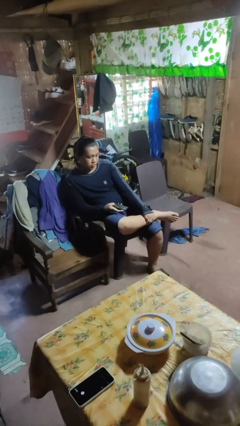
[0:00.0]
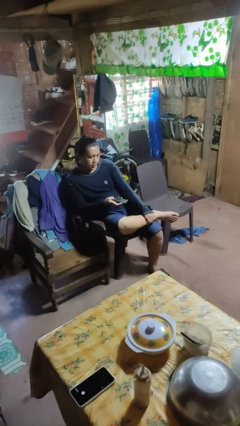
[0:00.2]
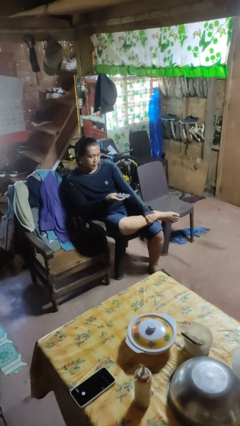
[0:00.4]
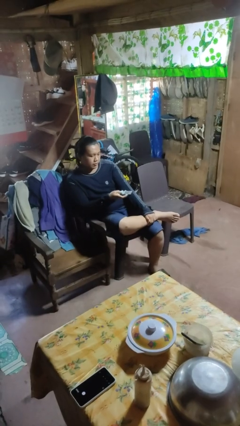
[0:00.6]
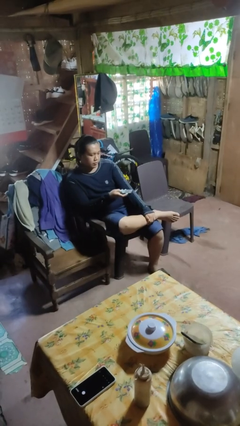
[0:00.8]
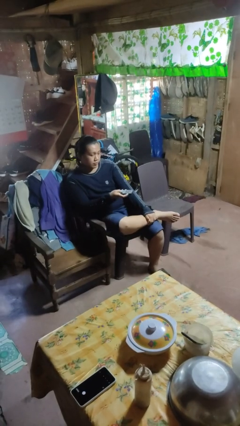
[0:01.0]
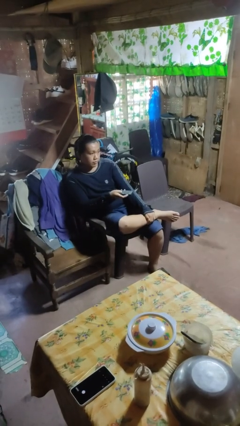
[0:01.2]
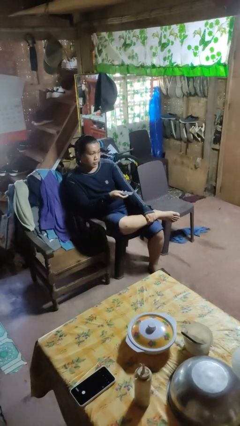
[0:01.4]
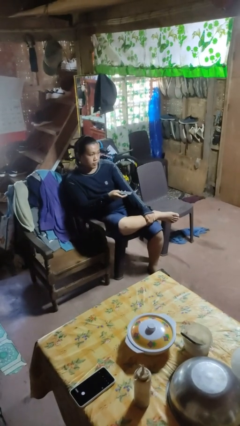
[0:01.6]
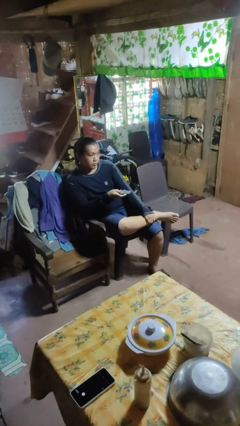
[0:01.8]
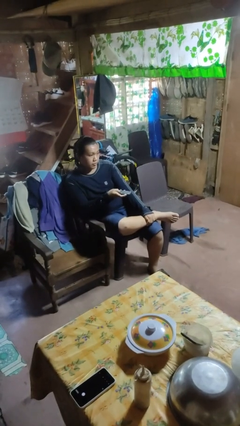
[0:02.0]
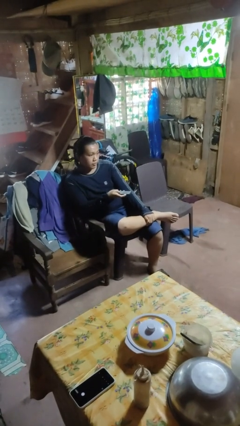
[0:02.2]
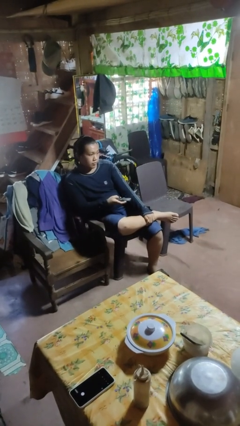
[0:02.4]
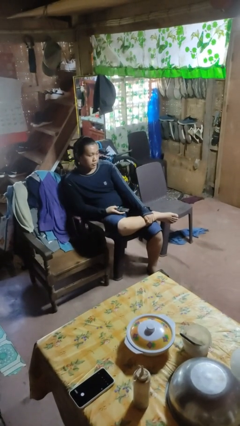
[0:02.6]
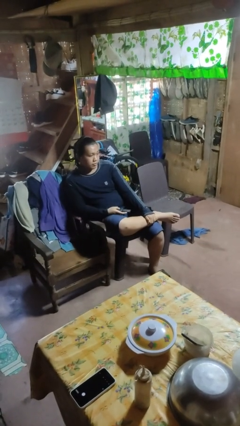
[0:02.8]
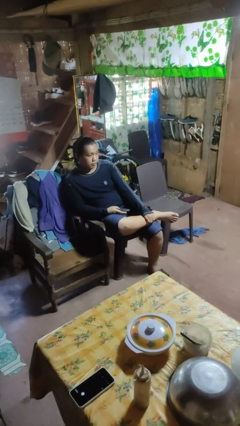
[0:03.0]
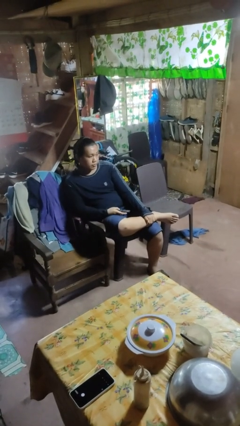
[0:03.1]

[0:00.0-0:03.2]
person uses television remote

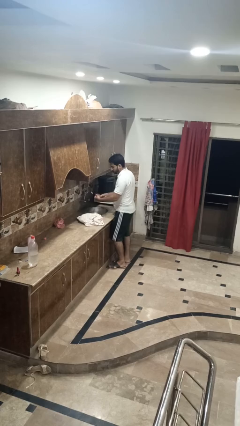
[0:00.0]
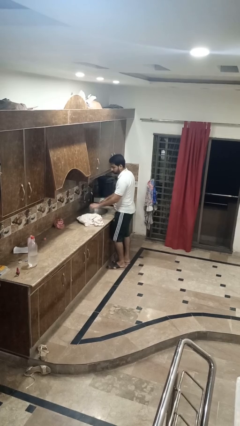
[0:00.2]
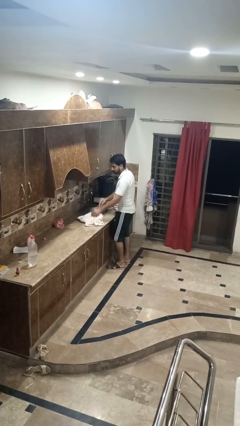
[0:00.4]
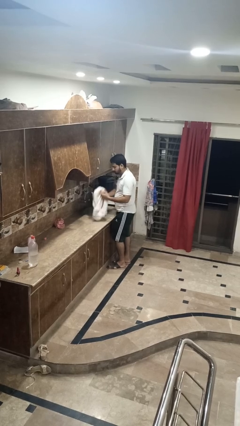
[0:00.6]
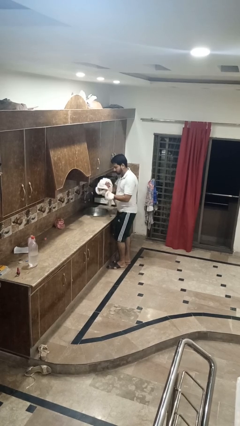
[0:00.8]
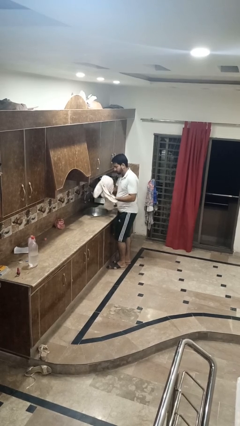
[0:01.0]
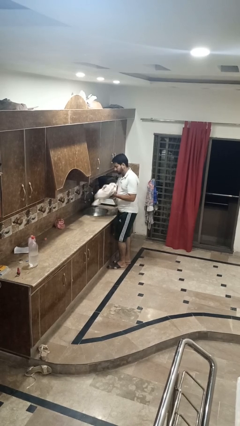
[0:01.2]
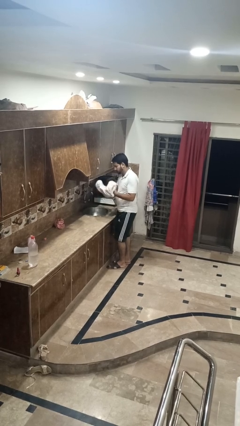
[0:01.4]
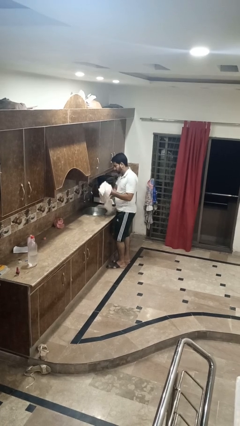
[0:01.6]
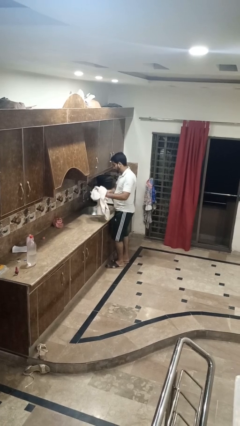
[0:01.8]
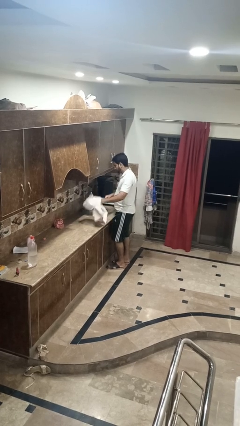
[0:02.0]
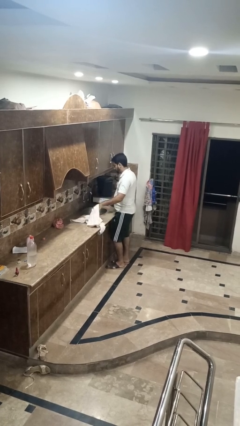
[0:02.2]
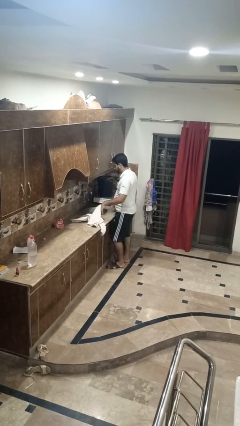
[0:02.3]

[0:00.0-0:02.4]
person dries hands with towel

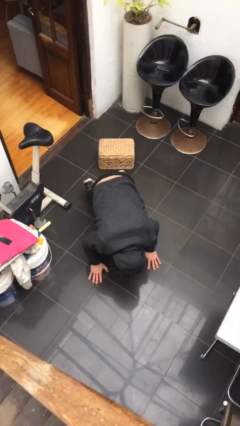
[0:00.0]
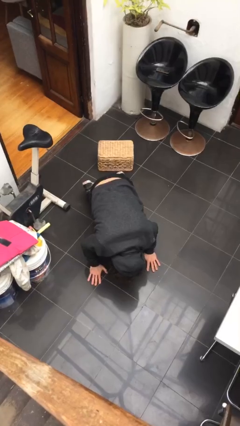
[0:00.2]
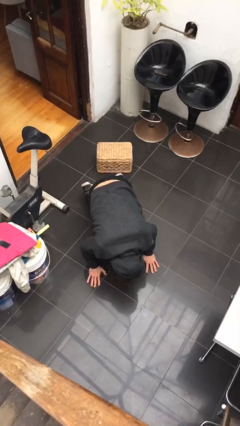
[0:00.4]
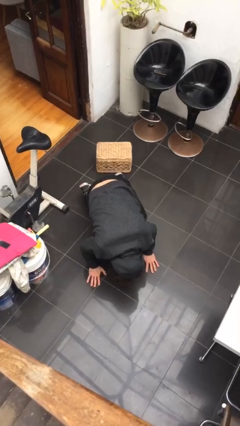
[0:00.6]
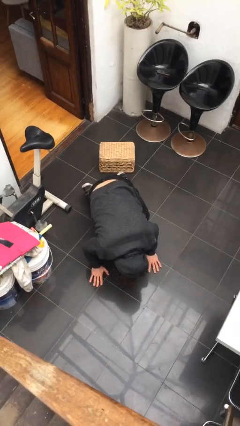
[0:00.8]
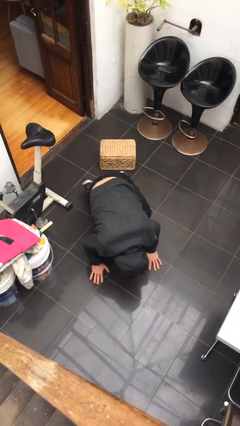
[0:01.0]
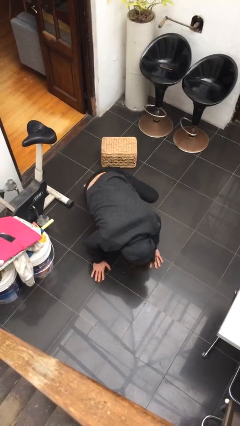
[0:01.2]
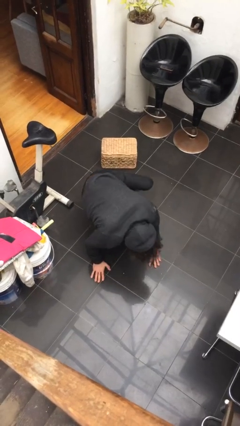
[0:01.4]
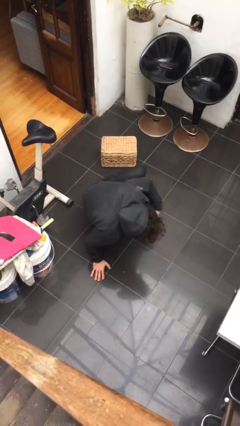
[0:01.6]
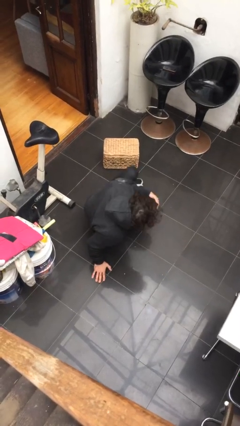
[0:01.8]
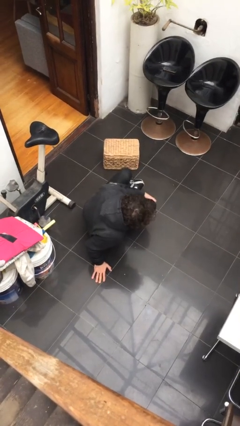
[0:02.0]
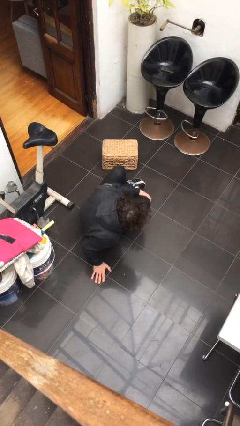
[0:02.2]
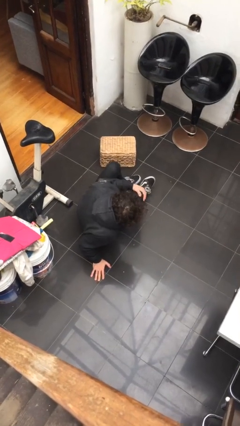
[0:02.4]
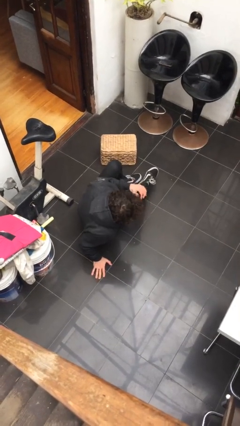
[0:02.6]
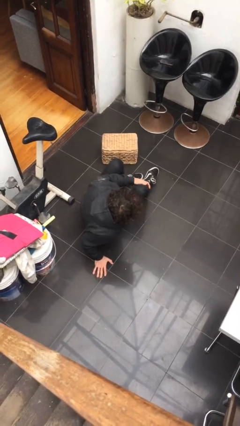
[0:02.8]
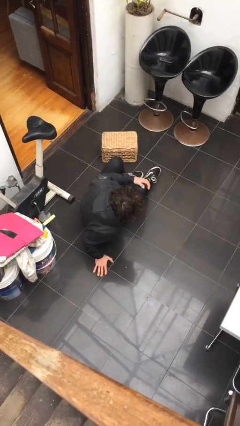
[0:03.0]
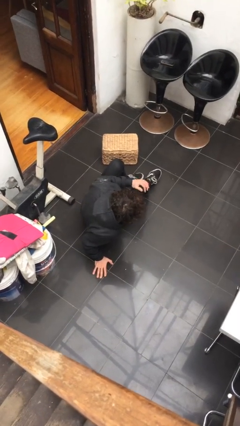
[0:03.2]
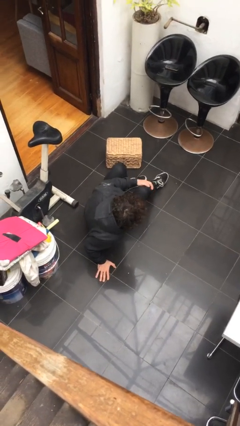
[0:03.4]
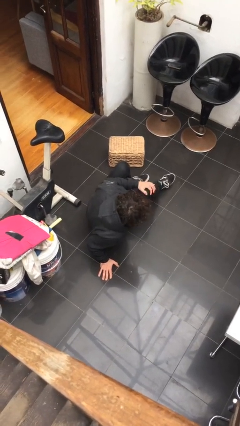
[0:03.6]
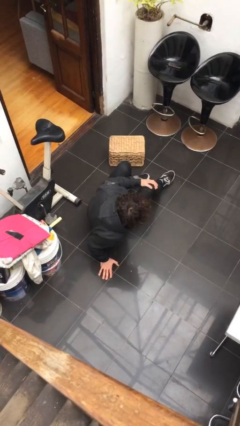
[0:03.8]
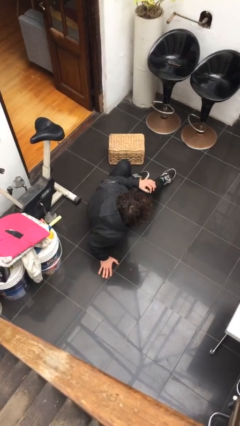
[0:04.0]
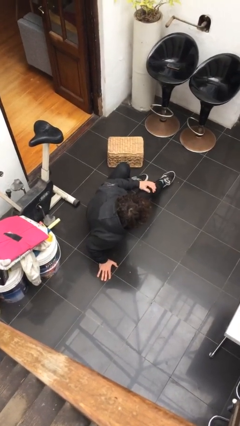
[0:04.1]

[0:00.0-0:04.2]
person lies down on floor

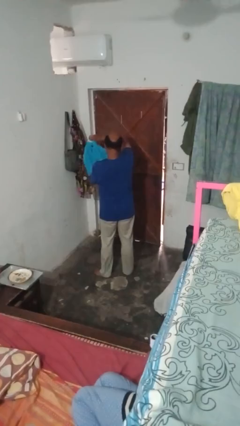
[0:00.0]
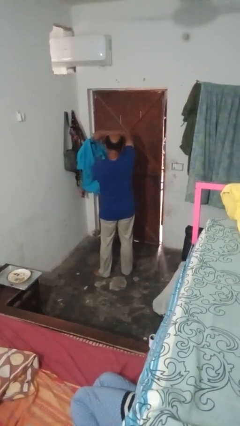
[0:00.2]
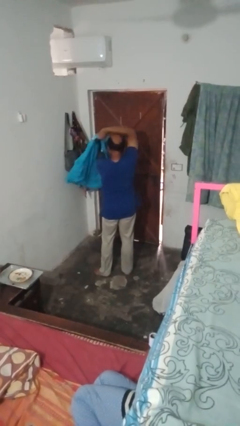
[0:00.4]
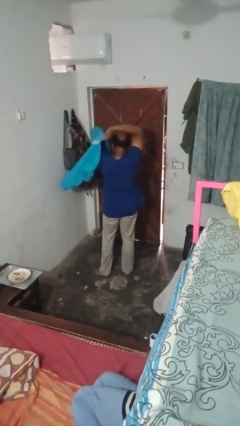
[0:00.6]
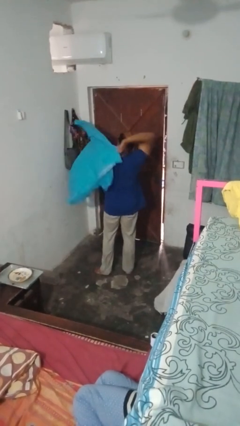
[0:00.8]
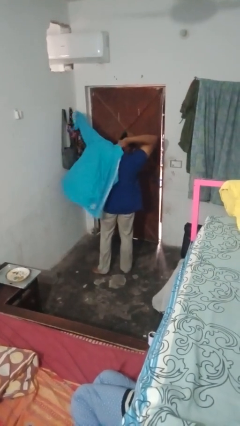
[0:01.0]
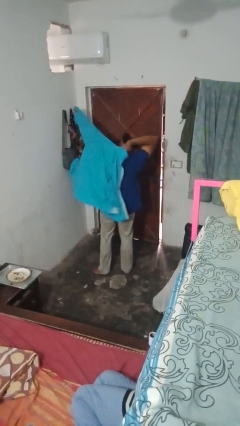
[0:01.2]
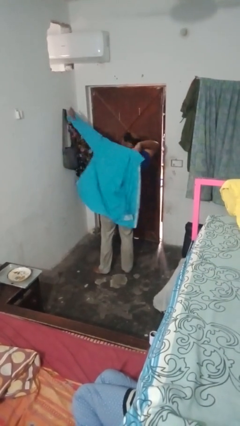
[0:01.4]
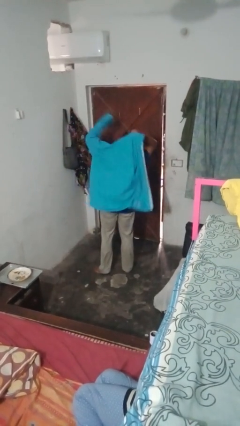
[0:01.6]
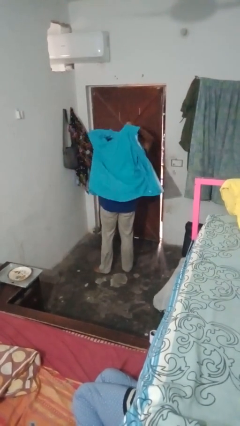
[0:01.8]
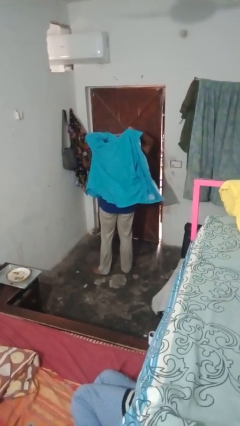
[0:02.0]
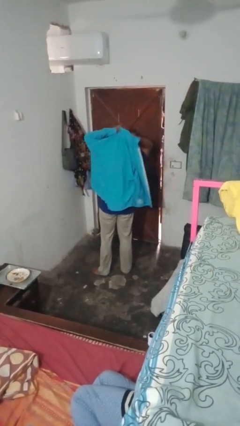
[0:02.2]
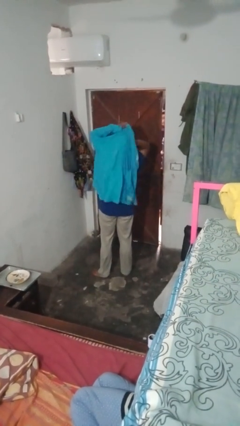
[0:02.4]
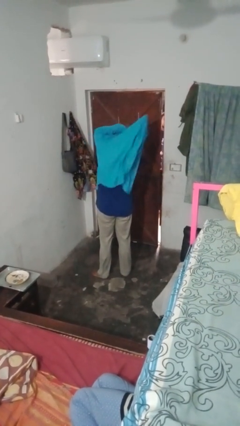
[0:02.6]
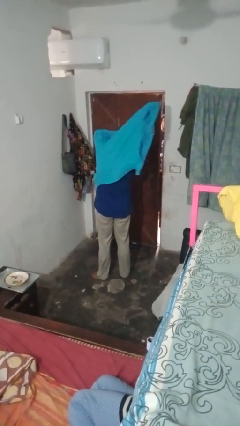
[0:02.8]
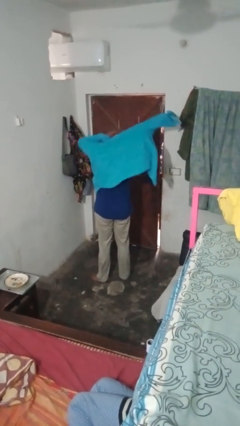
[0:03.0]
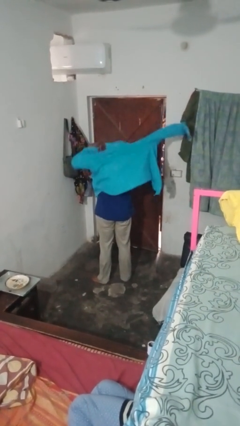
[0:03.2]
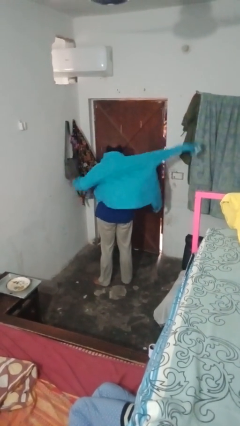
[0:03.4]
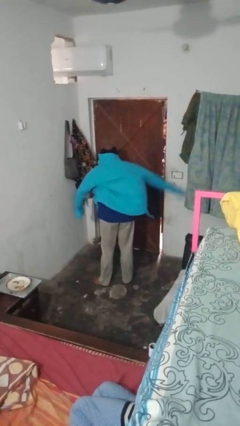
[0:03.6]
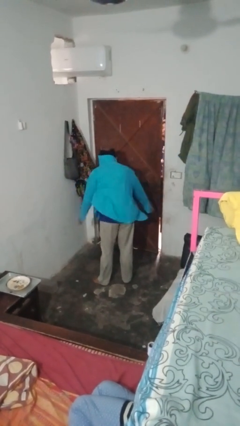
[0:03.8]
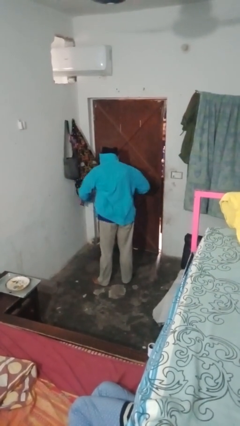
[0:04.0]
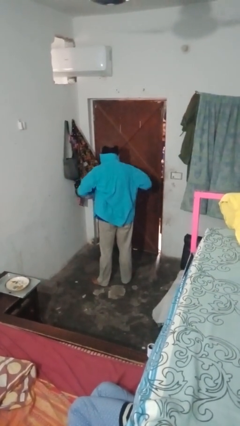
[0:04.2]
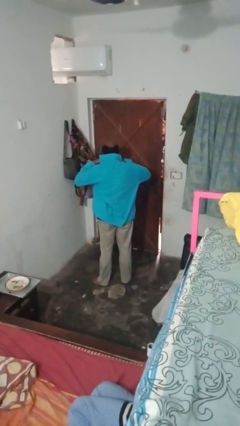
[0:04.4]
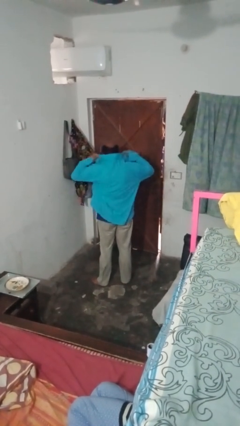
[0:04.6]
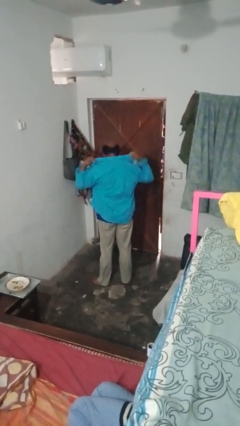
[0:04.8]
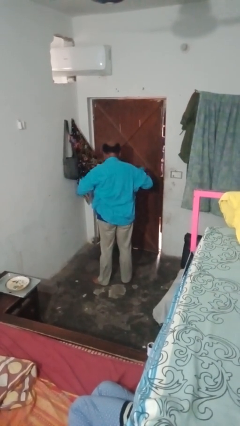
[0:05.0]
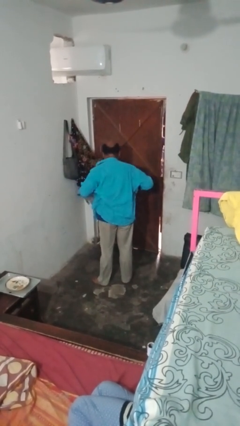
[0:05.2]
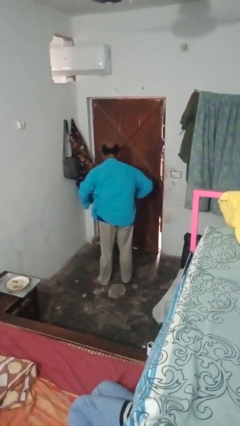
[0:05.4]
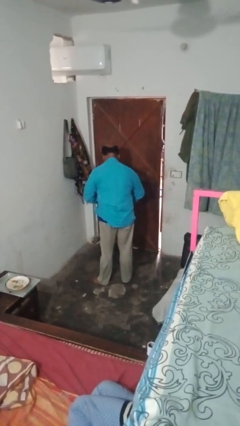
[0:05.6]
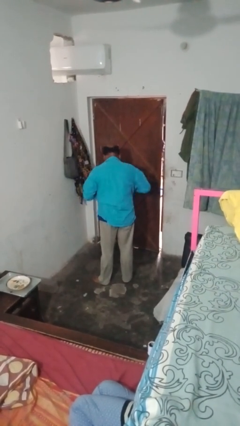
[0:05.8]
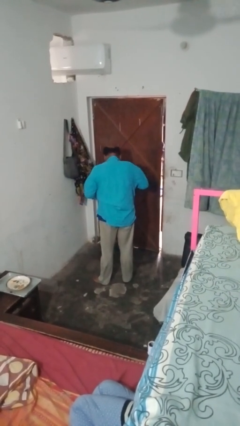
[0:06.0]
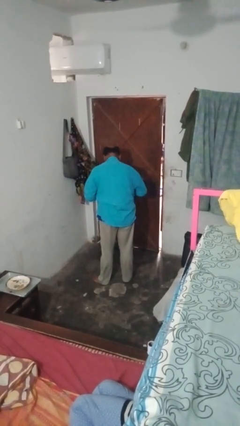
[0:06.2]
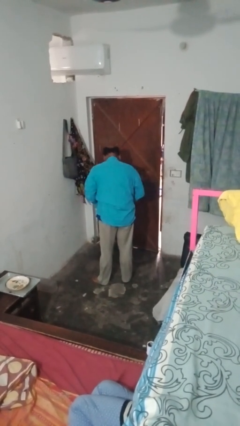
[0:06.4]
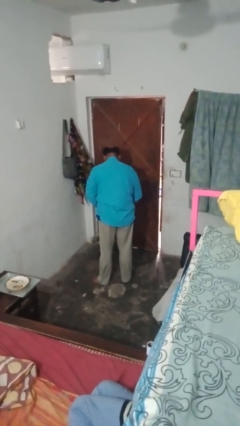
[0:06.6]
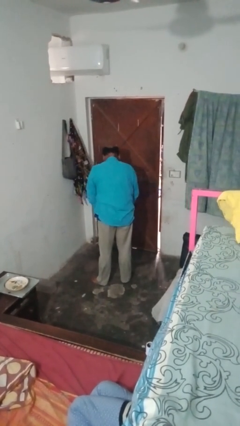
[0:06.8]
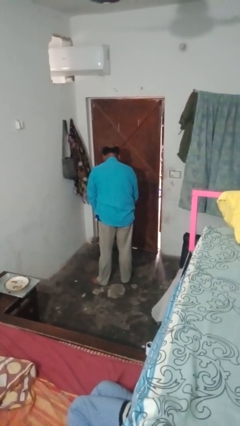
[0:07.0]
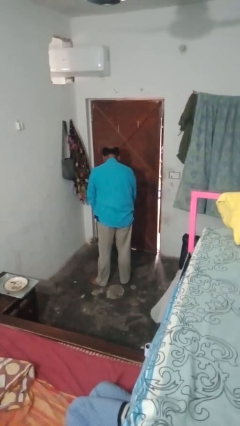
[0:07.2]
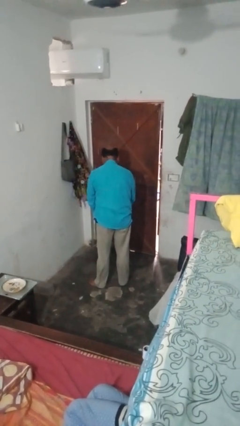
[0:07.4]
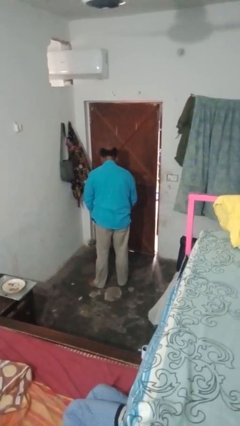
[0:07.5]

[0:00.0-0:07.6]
person puts on shirt
